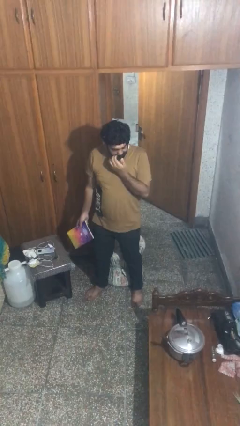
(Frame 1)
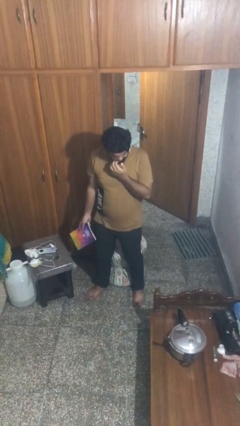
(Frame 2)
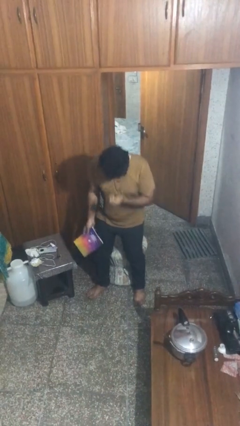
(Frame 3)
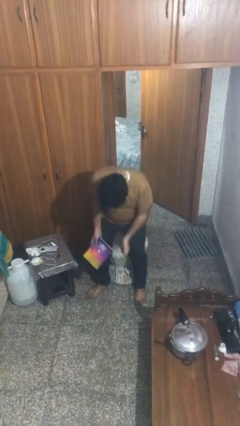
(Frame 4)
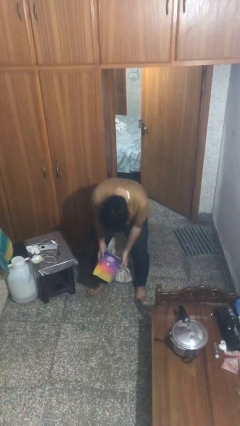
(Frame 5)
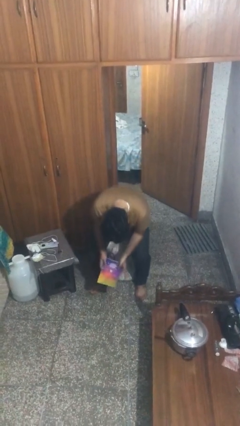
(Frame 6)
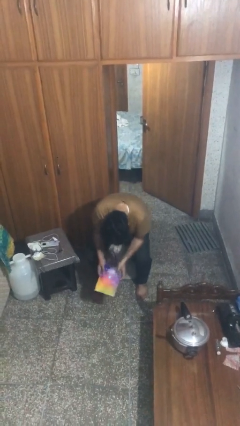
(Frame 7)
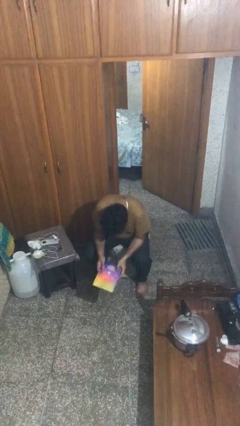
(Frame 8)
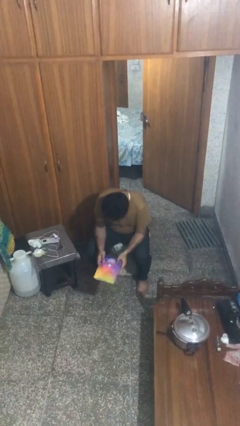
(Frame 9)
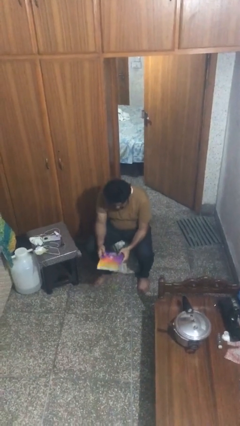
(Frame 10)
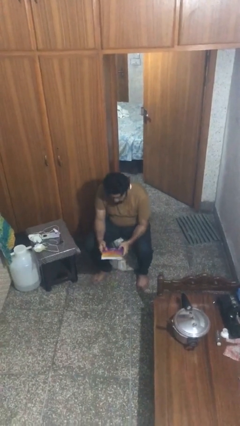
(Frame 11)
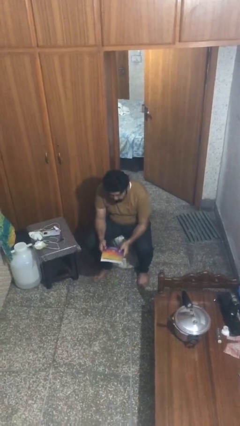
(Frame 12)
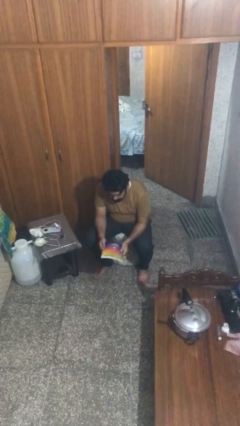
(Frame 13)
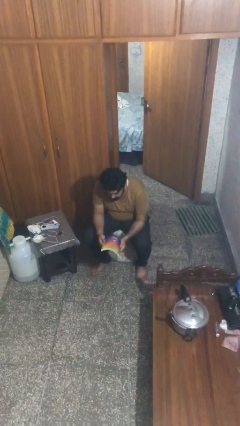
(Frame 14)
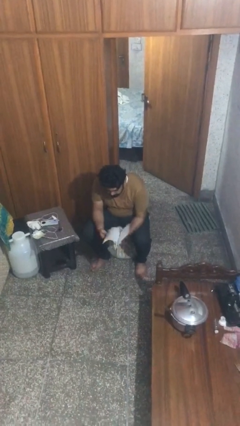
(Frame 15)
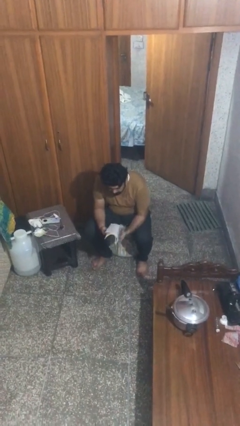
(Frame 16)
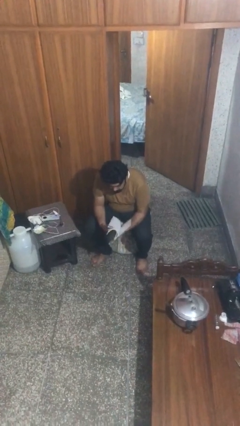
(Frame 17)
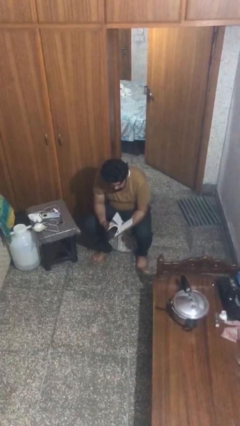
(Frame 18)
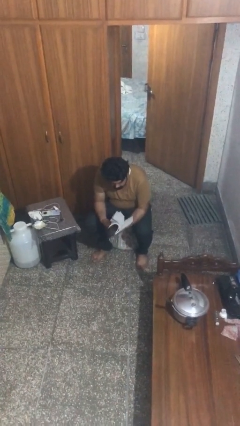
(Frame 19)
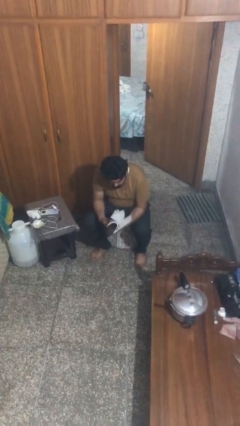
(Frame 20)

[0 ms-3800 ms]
person sits down

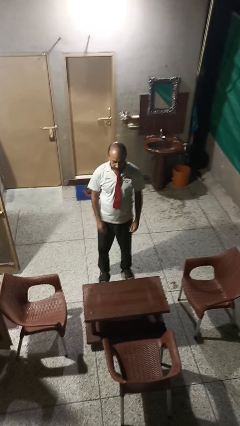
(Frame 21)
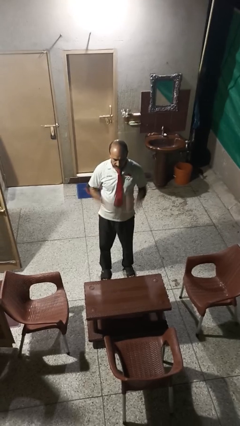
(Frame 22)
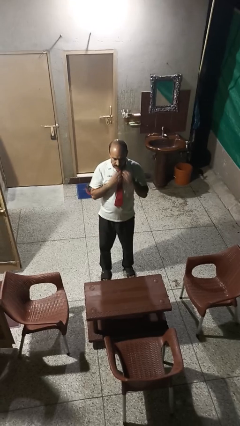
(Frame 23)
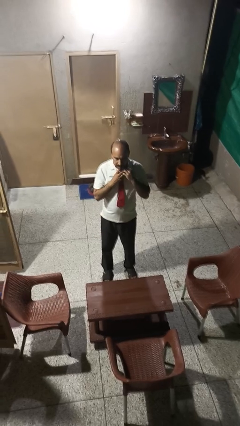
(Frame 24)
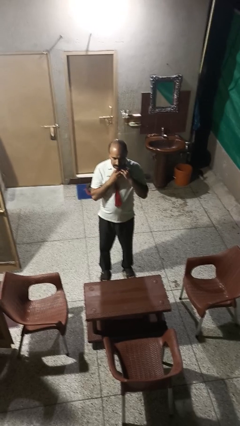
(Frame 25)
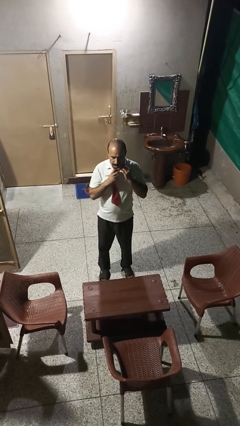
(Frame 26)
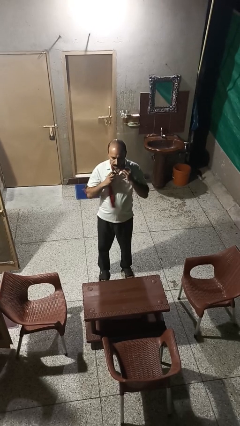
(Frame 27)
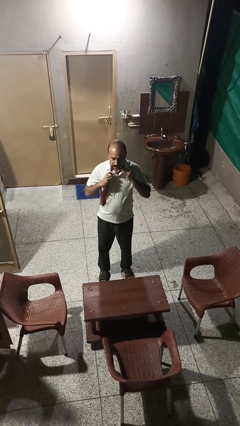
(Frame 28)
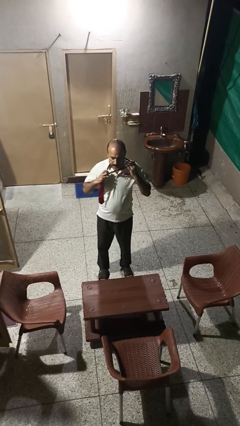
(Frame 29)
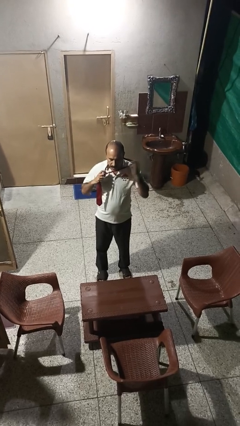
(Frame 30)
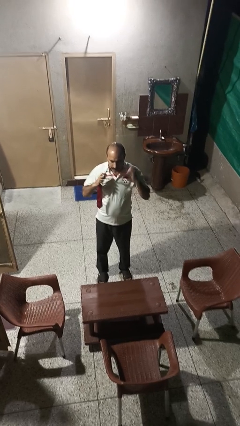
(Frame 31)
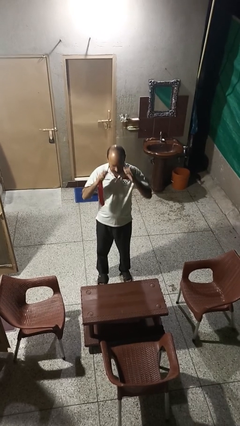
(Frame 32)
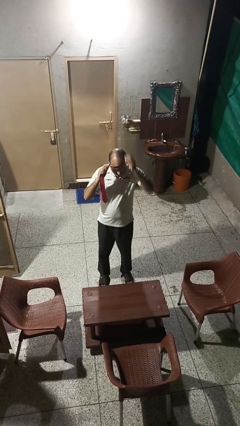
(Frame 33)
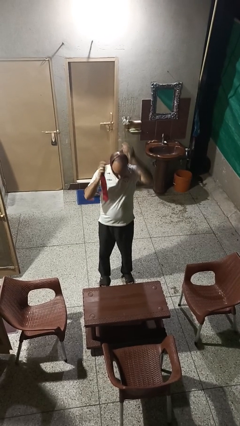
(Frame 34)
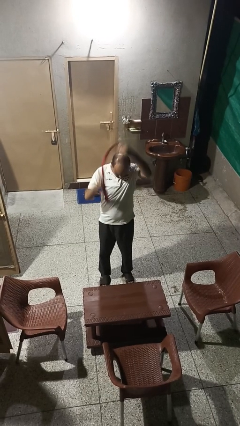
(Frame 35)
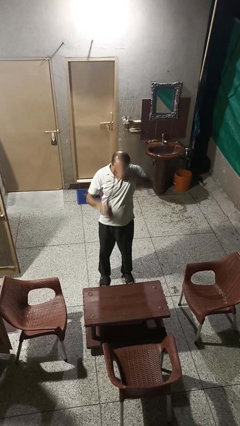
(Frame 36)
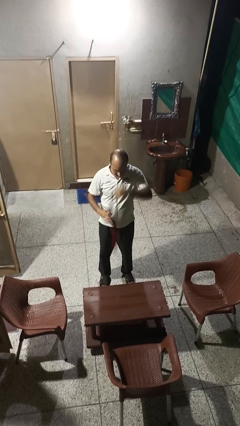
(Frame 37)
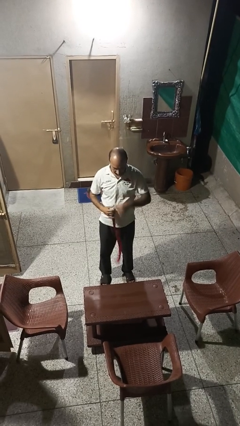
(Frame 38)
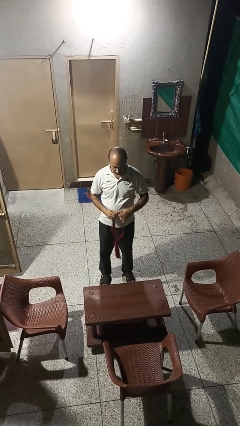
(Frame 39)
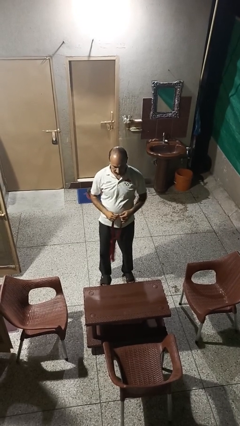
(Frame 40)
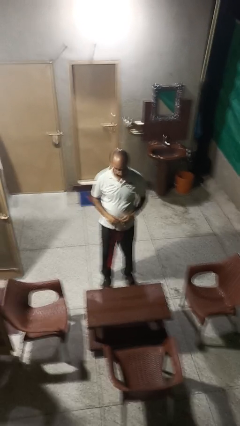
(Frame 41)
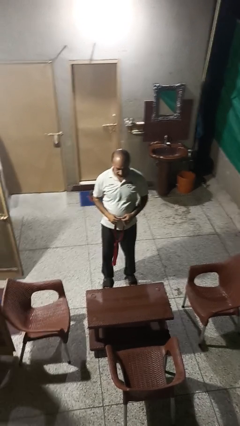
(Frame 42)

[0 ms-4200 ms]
person takes off necktie

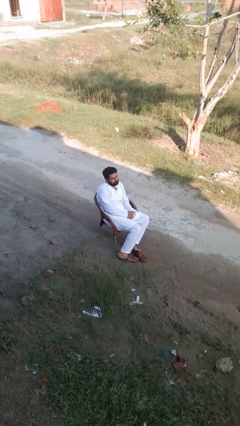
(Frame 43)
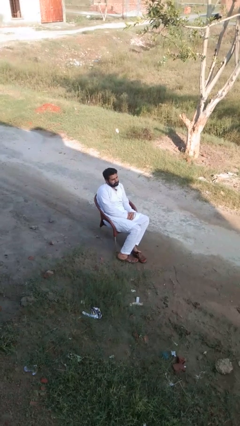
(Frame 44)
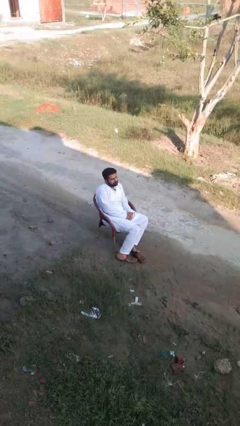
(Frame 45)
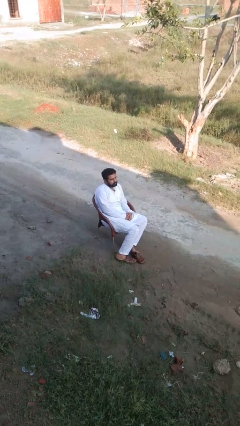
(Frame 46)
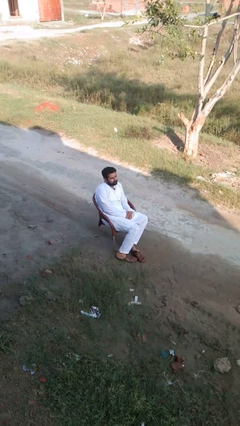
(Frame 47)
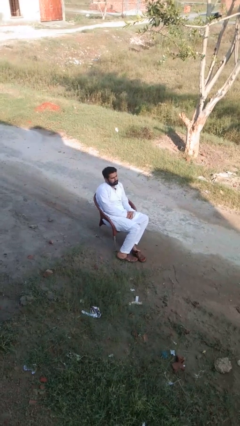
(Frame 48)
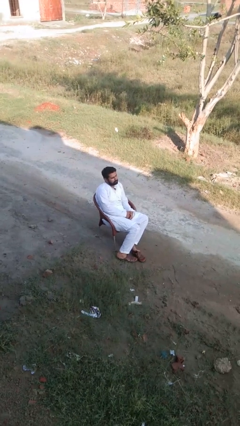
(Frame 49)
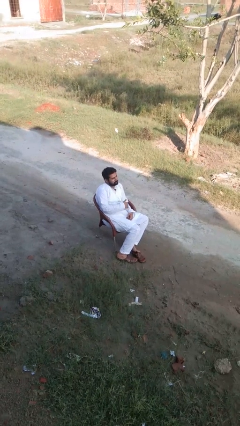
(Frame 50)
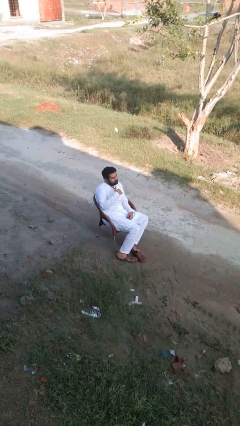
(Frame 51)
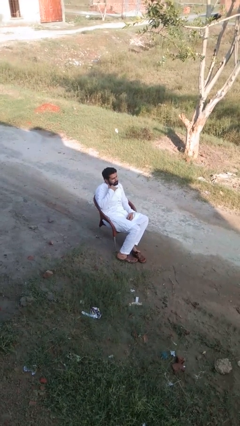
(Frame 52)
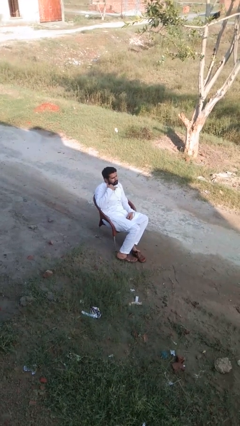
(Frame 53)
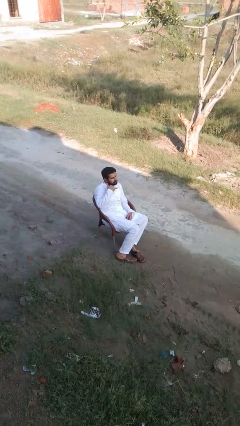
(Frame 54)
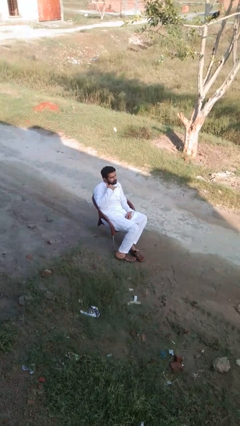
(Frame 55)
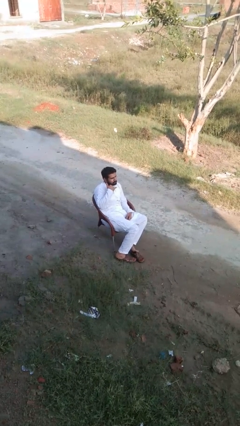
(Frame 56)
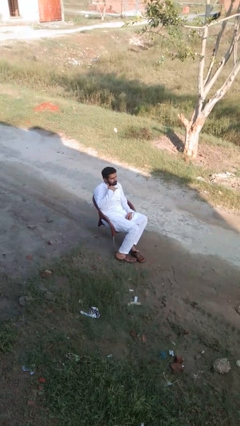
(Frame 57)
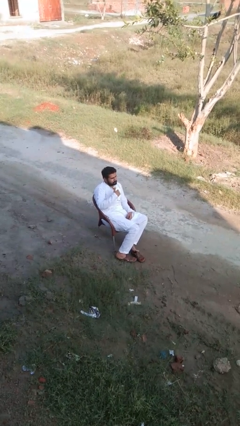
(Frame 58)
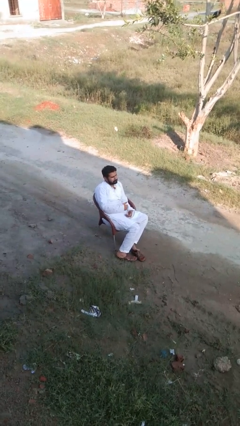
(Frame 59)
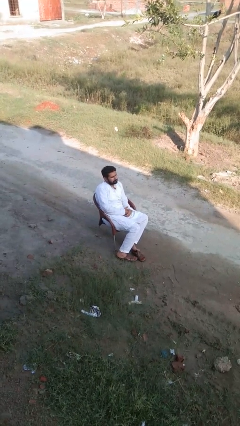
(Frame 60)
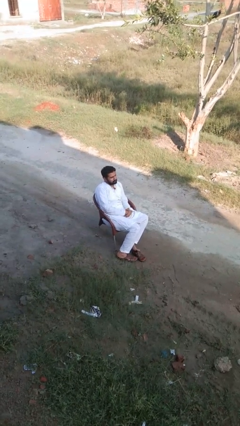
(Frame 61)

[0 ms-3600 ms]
person gestures call me

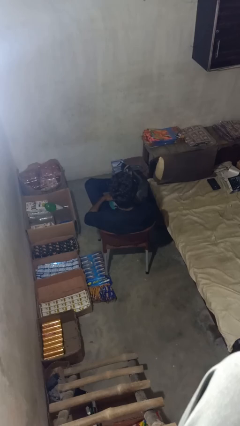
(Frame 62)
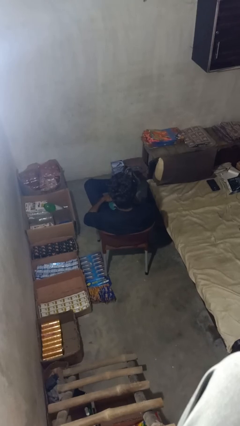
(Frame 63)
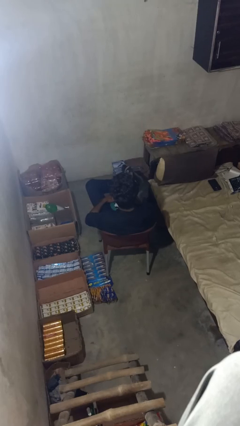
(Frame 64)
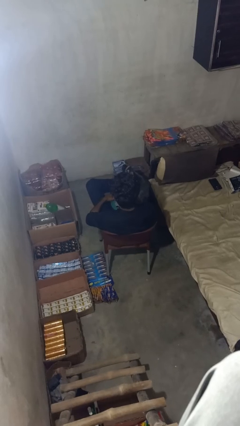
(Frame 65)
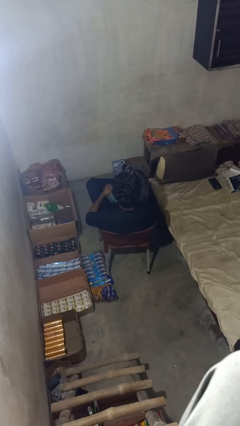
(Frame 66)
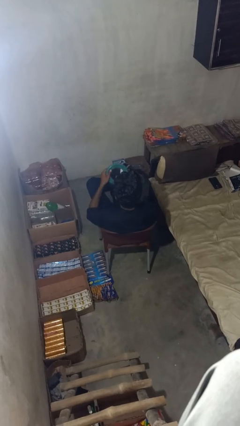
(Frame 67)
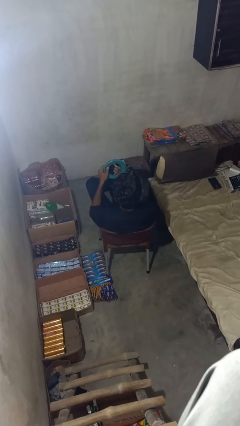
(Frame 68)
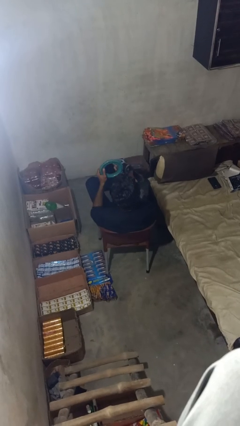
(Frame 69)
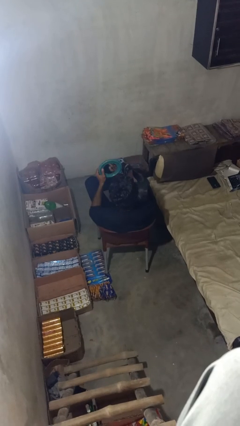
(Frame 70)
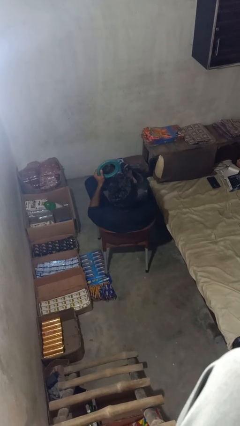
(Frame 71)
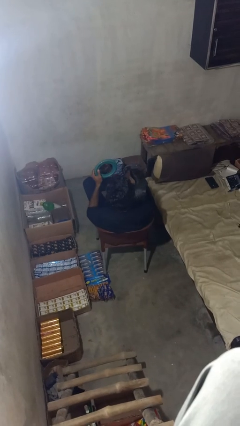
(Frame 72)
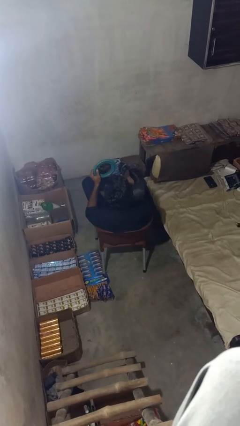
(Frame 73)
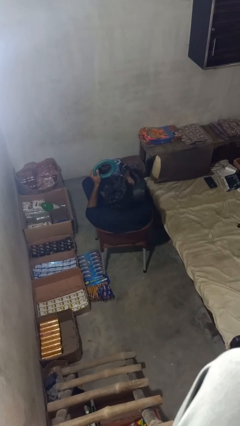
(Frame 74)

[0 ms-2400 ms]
person applies lip makeup

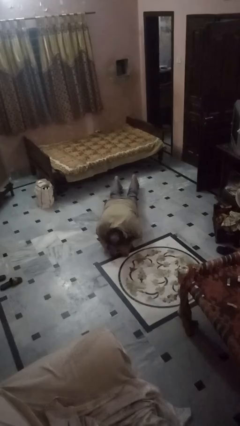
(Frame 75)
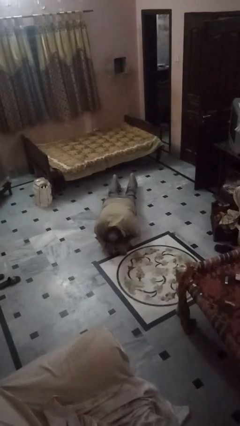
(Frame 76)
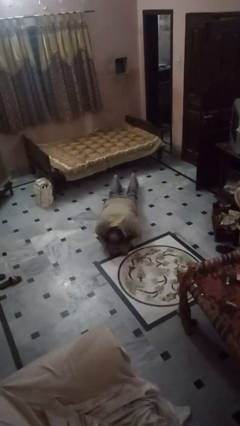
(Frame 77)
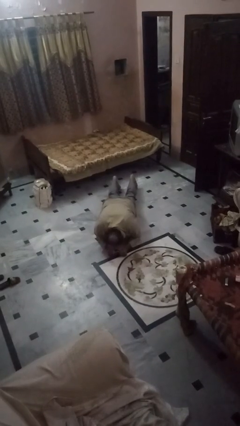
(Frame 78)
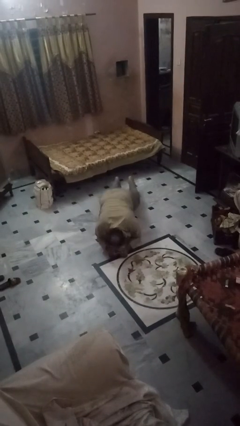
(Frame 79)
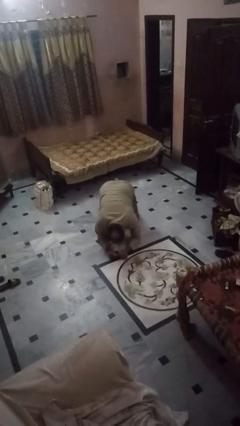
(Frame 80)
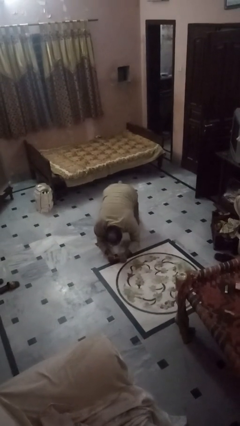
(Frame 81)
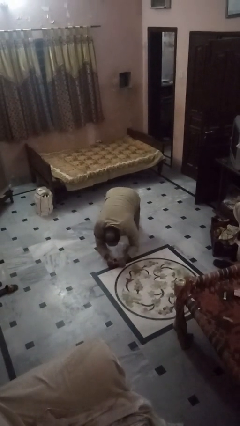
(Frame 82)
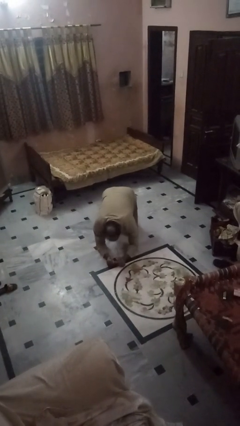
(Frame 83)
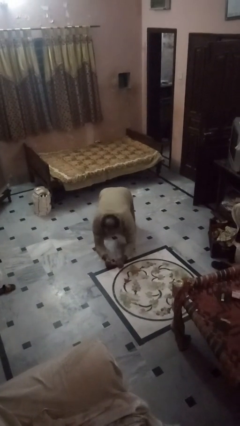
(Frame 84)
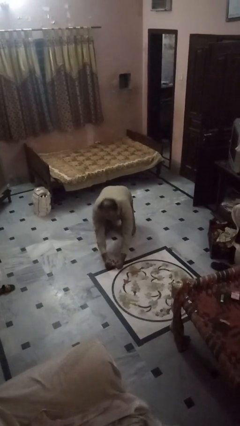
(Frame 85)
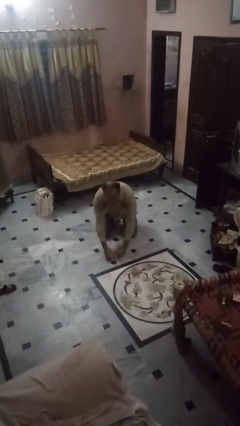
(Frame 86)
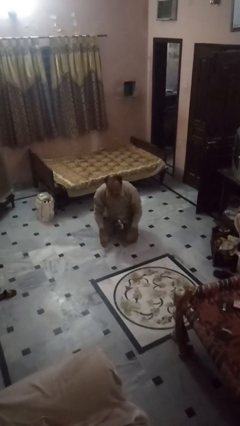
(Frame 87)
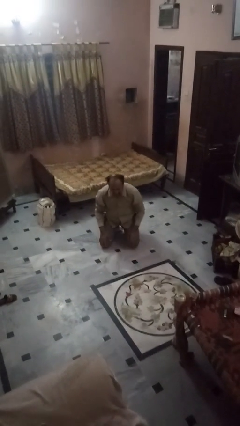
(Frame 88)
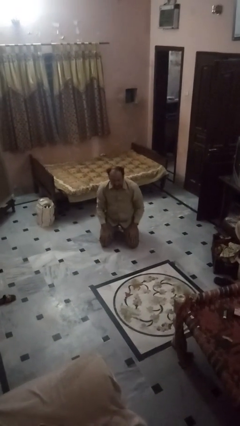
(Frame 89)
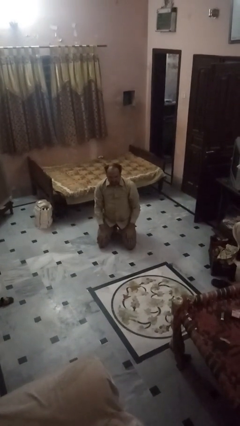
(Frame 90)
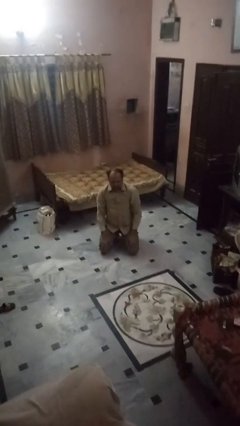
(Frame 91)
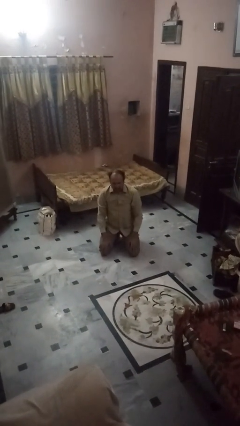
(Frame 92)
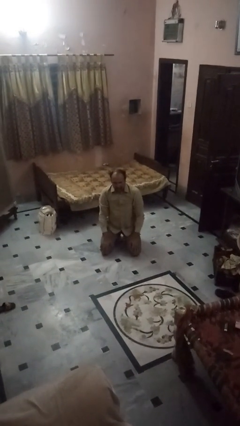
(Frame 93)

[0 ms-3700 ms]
person stands up from floor
